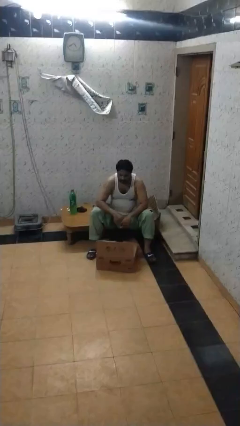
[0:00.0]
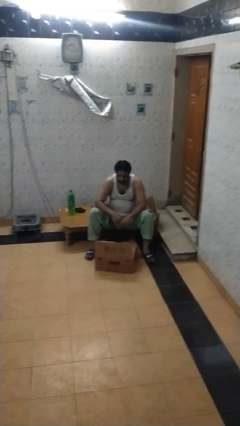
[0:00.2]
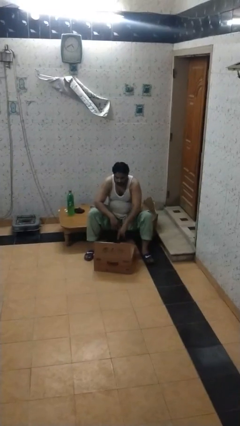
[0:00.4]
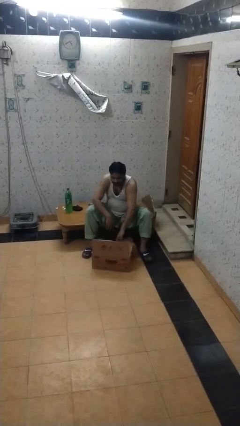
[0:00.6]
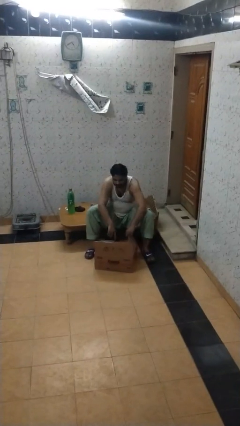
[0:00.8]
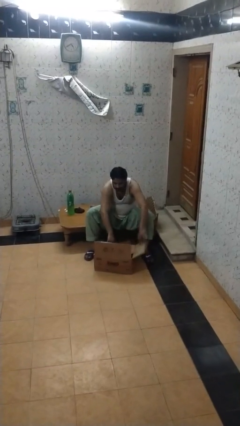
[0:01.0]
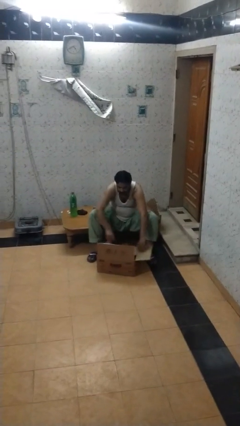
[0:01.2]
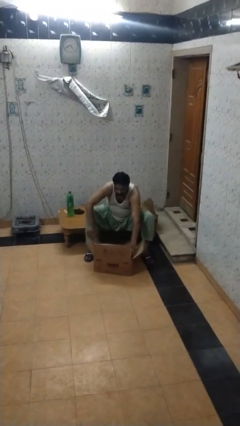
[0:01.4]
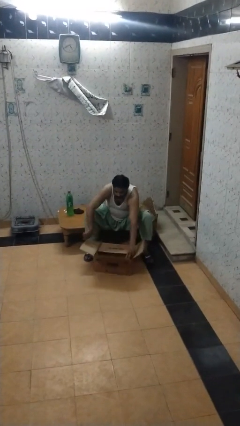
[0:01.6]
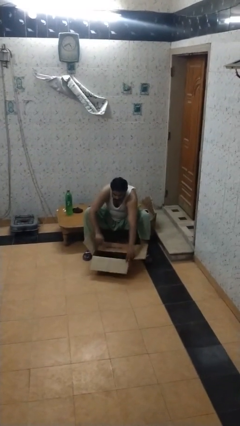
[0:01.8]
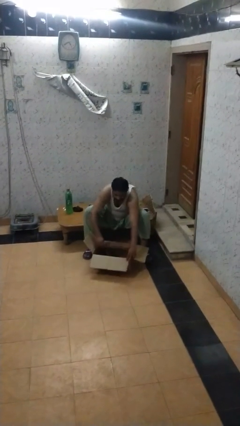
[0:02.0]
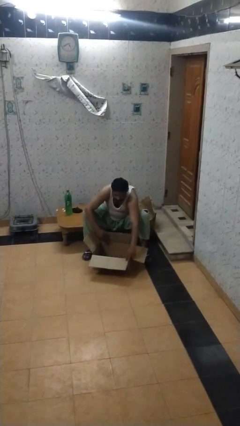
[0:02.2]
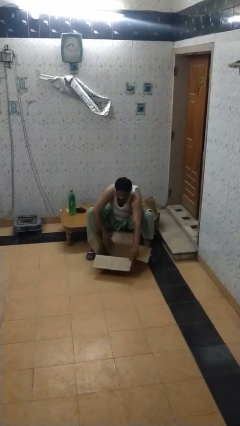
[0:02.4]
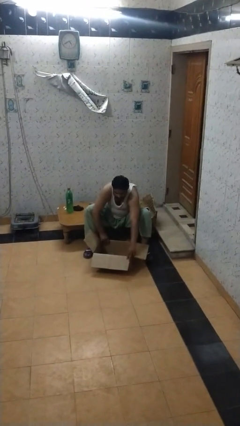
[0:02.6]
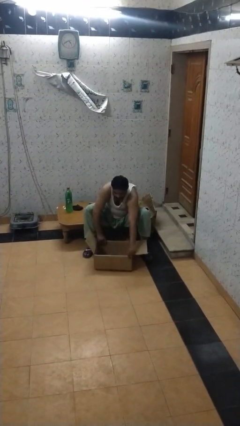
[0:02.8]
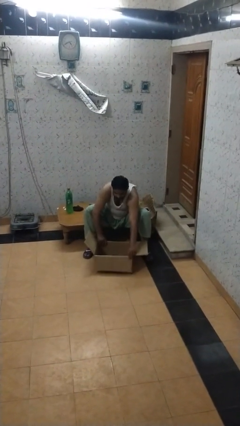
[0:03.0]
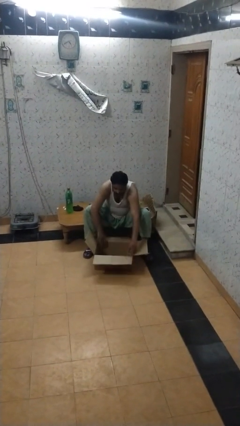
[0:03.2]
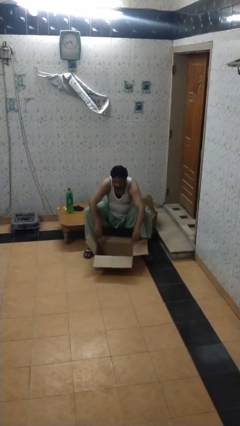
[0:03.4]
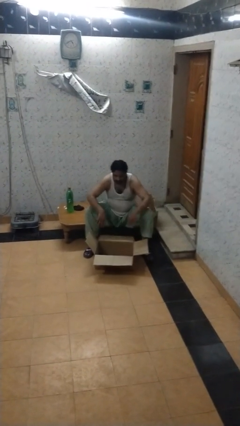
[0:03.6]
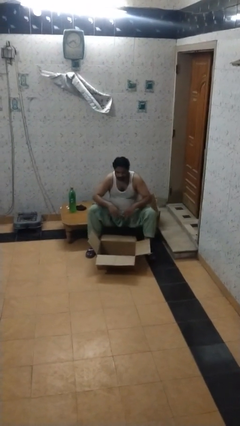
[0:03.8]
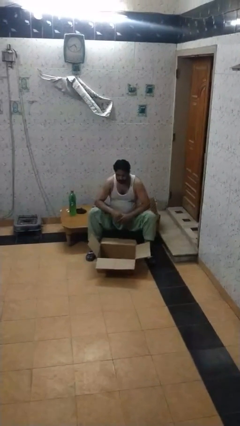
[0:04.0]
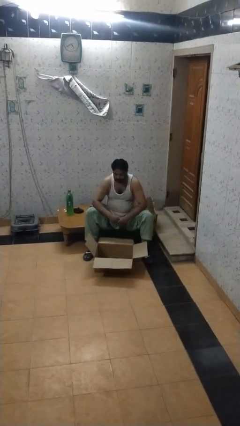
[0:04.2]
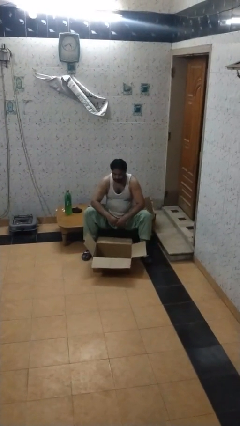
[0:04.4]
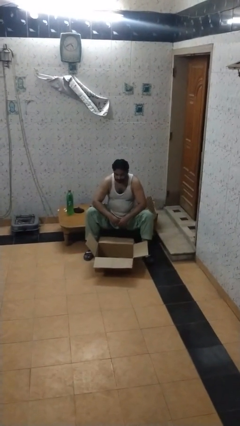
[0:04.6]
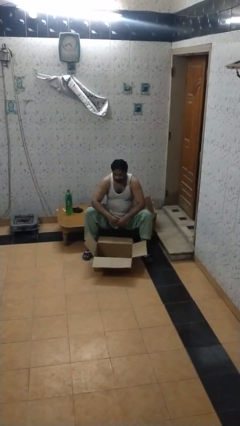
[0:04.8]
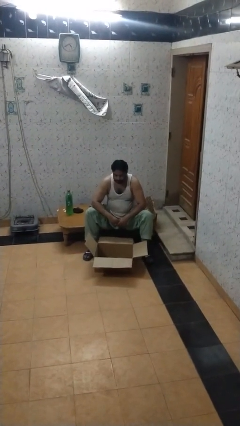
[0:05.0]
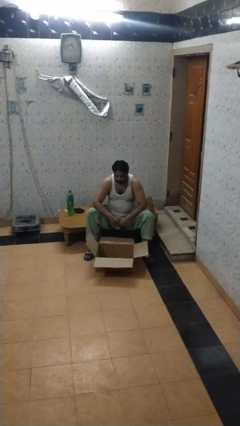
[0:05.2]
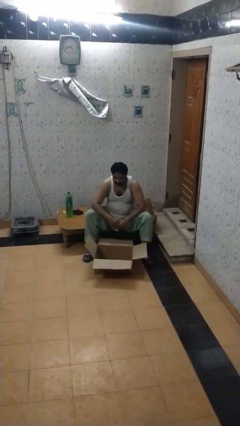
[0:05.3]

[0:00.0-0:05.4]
person opens box

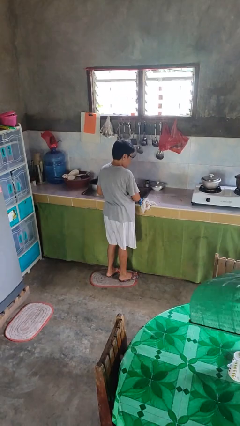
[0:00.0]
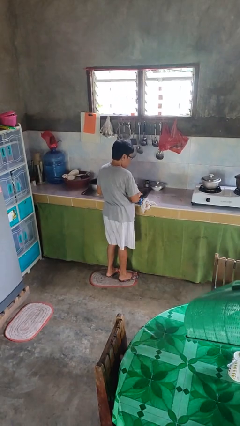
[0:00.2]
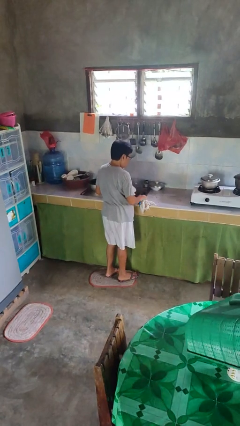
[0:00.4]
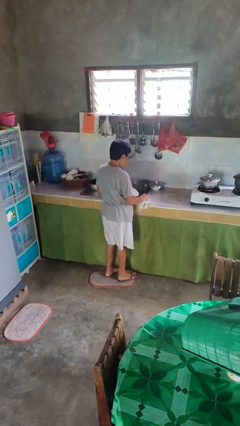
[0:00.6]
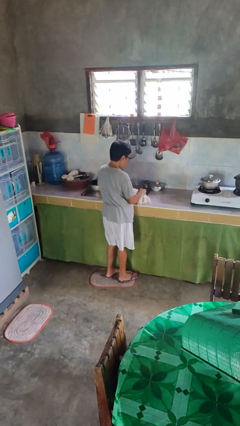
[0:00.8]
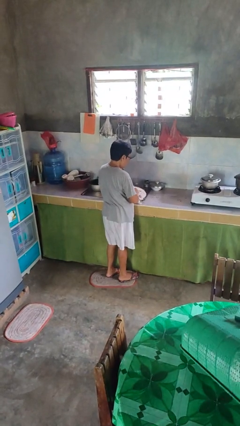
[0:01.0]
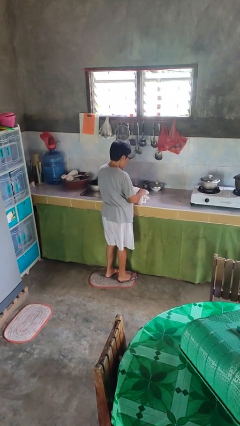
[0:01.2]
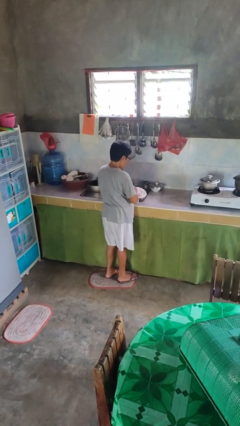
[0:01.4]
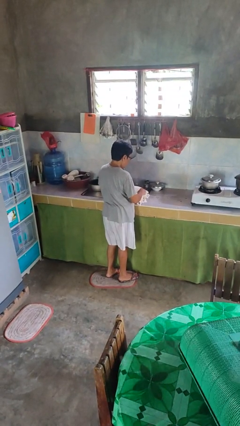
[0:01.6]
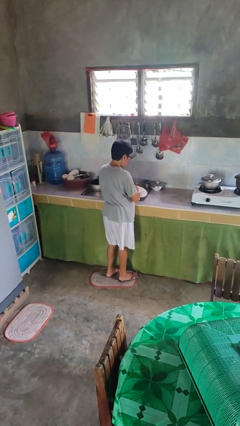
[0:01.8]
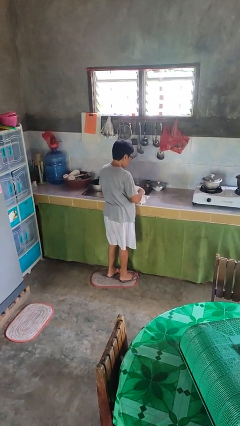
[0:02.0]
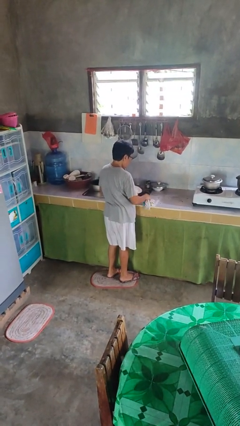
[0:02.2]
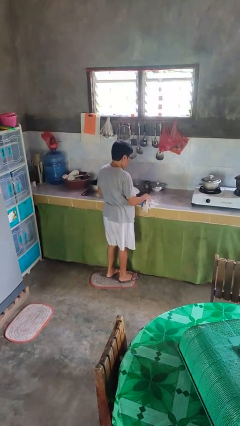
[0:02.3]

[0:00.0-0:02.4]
person dries dish

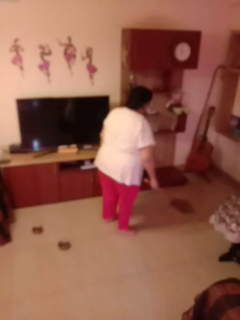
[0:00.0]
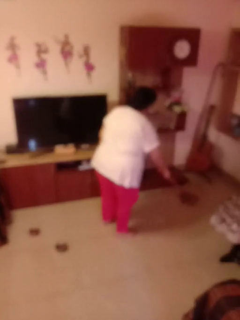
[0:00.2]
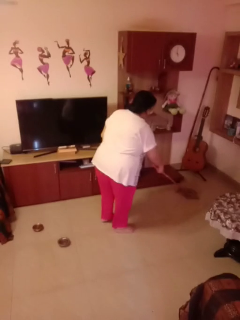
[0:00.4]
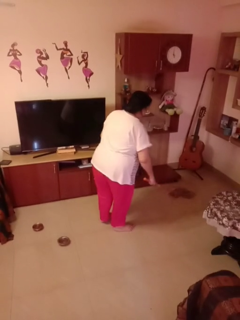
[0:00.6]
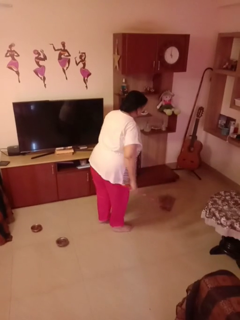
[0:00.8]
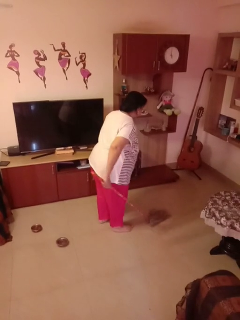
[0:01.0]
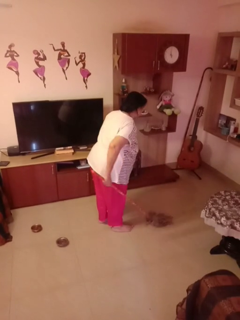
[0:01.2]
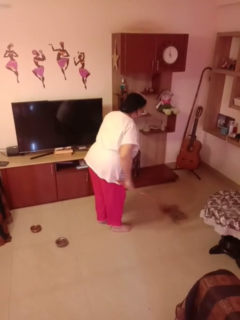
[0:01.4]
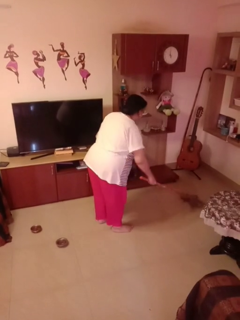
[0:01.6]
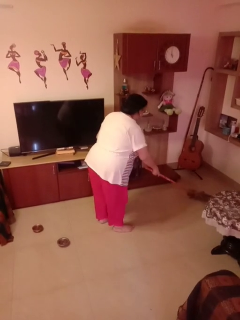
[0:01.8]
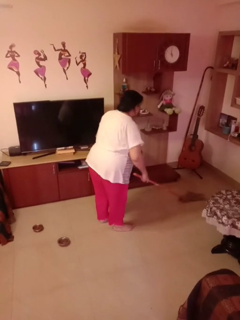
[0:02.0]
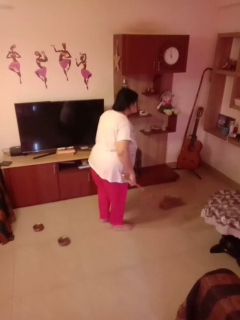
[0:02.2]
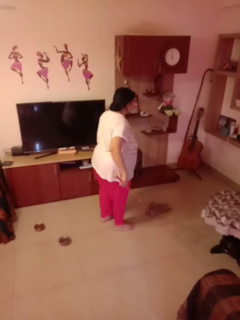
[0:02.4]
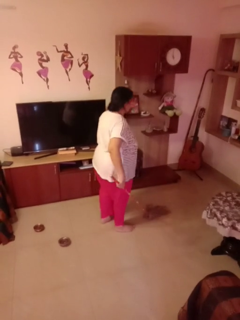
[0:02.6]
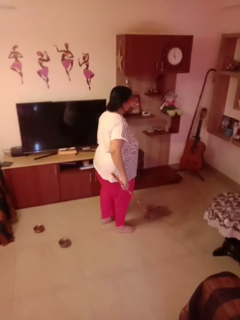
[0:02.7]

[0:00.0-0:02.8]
person mops

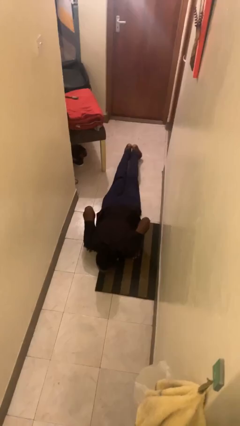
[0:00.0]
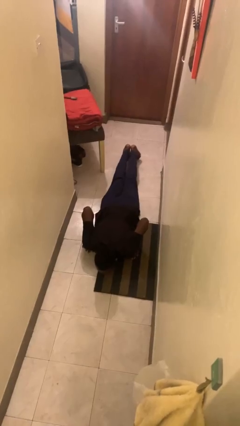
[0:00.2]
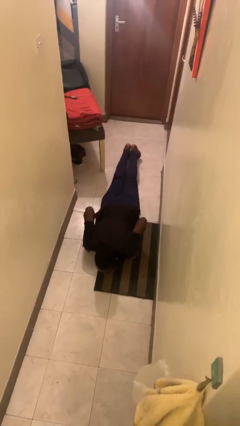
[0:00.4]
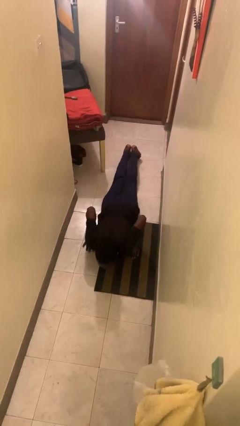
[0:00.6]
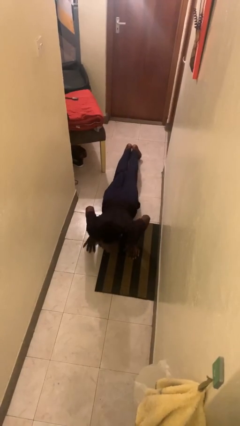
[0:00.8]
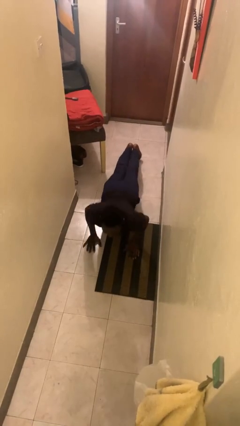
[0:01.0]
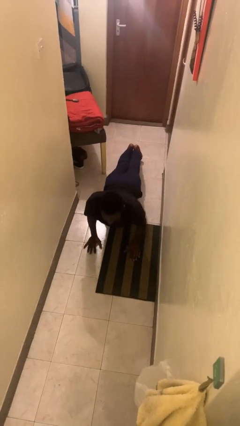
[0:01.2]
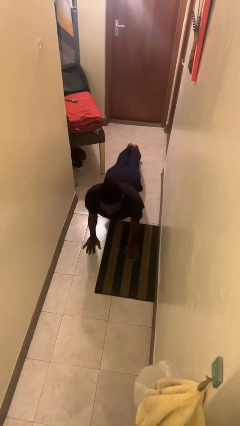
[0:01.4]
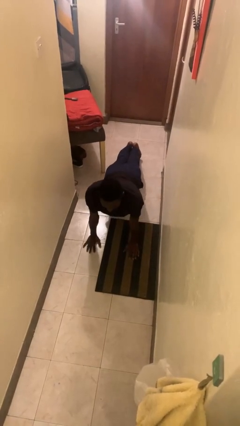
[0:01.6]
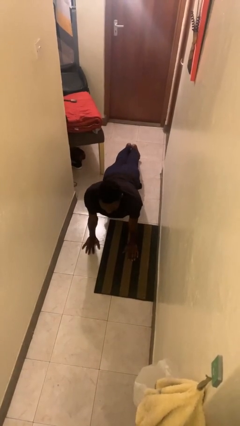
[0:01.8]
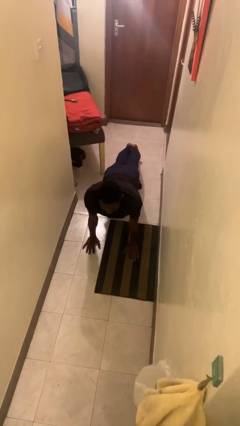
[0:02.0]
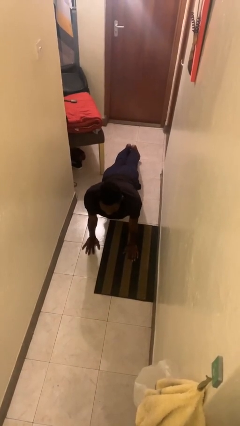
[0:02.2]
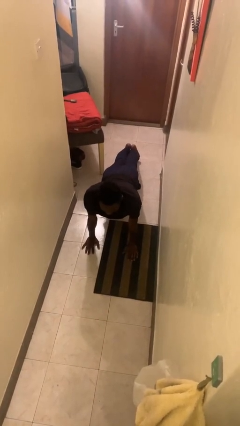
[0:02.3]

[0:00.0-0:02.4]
person exercises with pushup

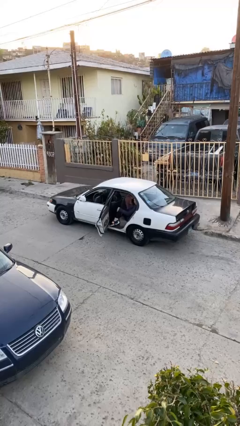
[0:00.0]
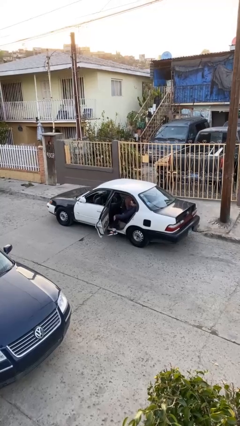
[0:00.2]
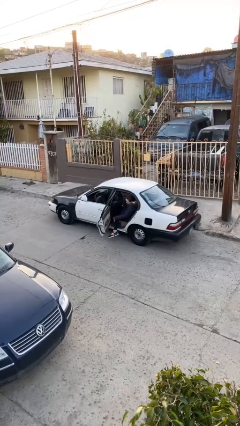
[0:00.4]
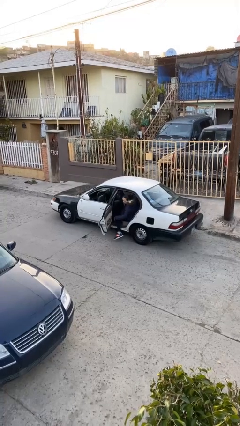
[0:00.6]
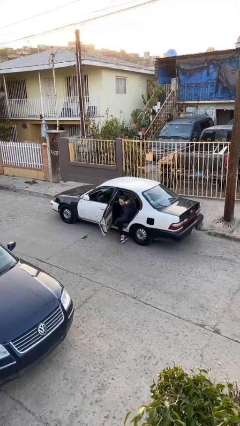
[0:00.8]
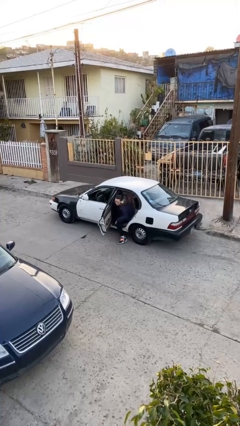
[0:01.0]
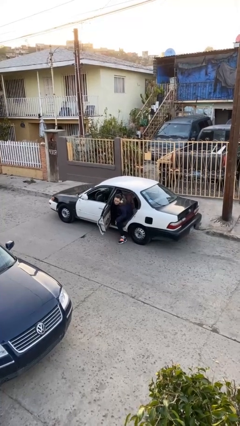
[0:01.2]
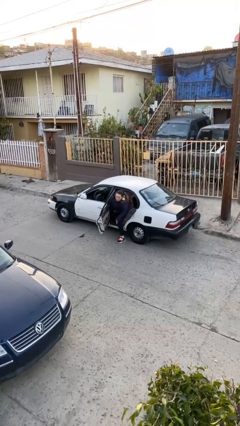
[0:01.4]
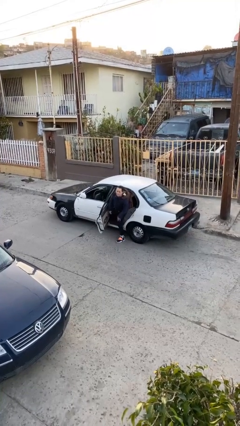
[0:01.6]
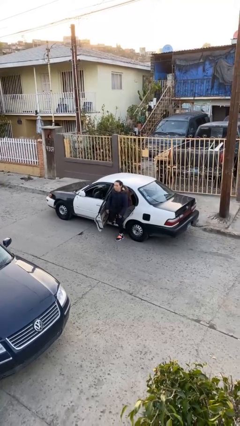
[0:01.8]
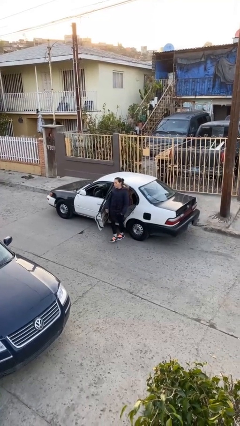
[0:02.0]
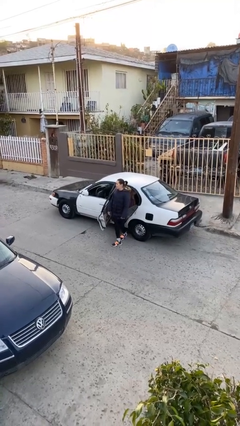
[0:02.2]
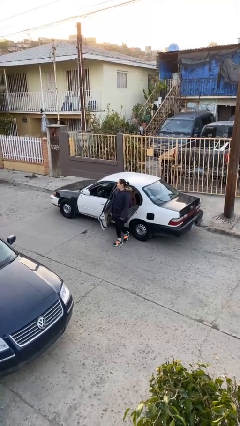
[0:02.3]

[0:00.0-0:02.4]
person exits car

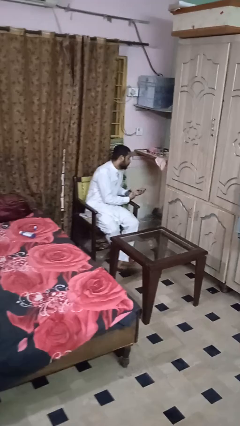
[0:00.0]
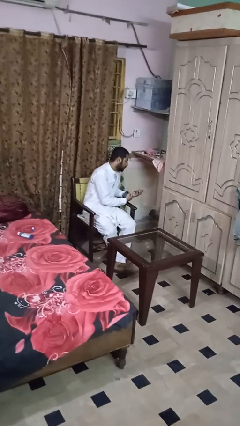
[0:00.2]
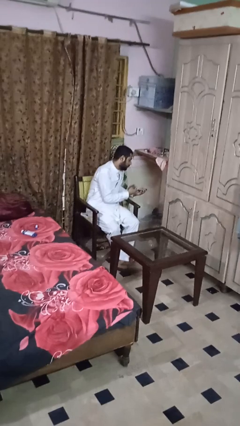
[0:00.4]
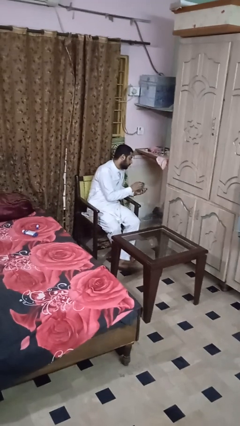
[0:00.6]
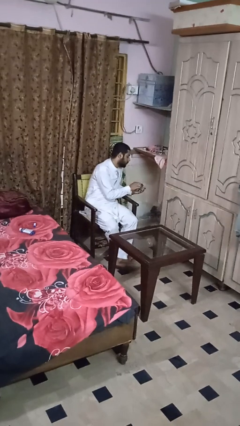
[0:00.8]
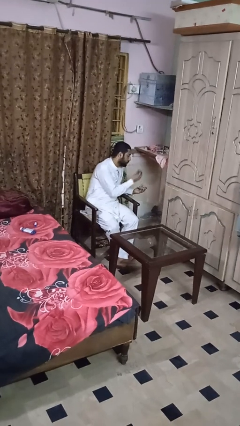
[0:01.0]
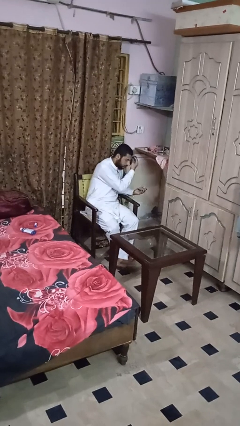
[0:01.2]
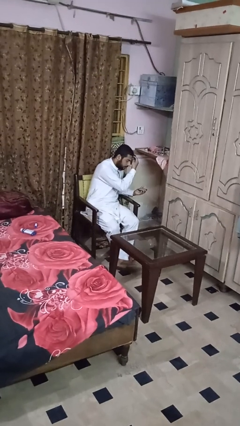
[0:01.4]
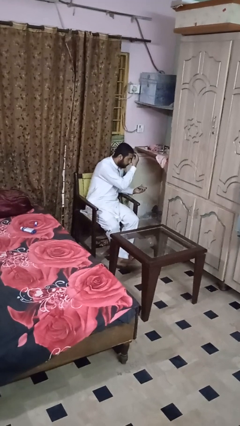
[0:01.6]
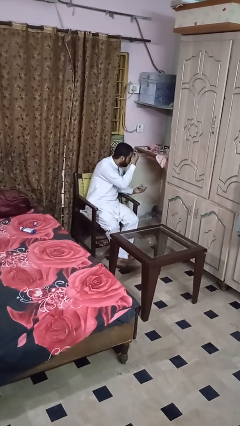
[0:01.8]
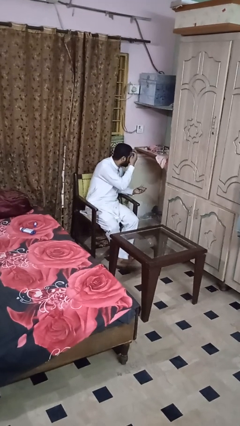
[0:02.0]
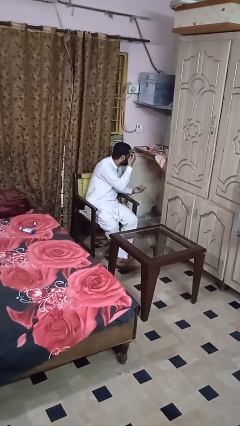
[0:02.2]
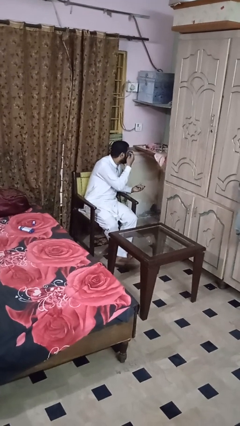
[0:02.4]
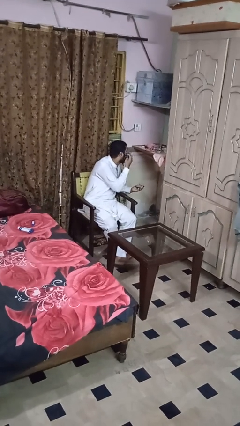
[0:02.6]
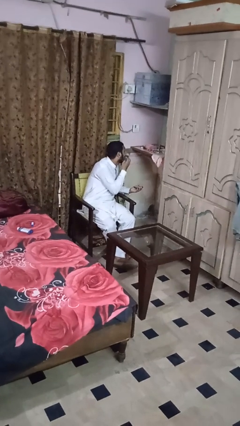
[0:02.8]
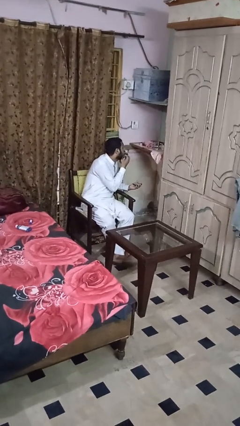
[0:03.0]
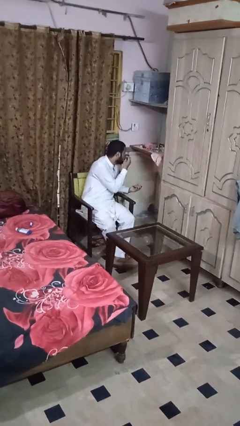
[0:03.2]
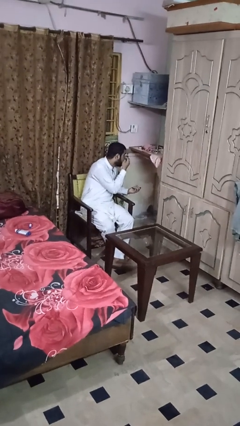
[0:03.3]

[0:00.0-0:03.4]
person applies foundation makeup
